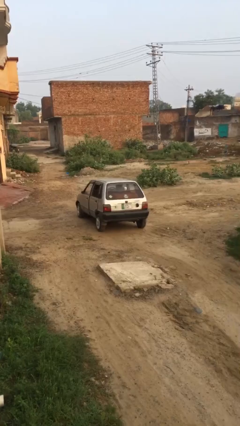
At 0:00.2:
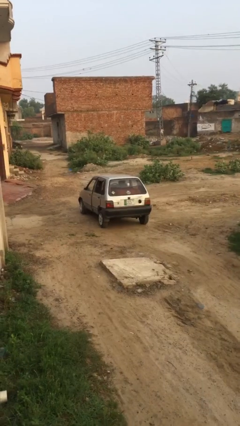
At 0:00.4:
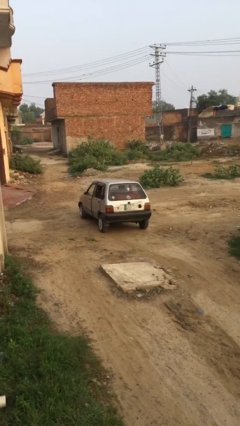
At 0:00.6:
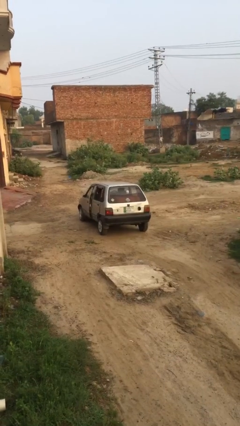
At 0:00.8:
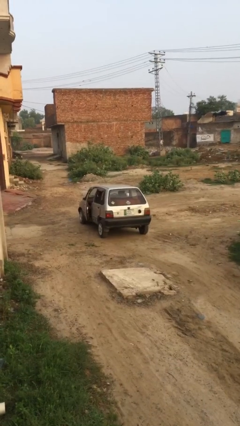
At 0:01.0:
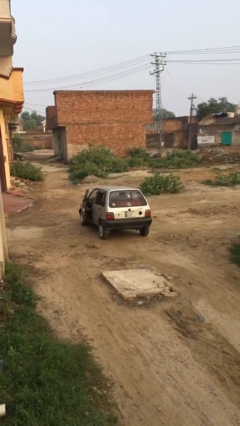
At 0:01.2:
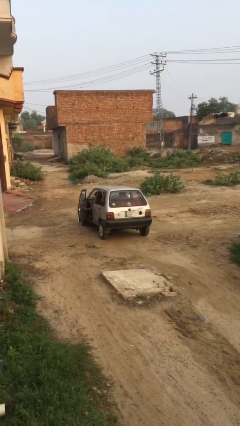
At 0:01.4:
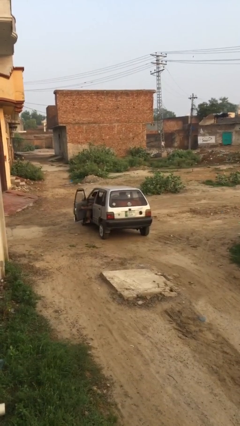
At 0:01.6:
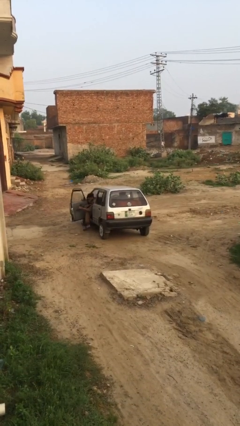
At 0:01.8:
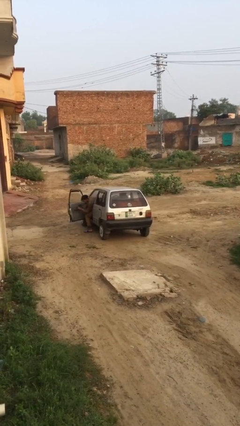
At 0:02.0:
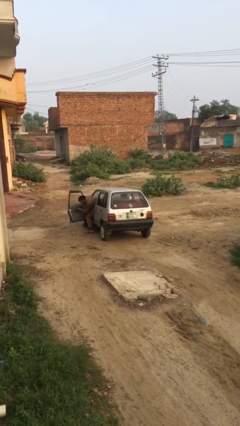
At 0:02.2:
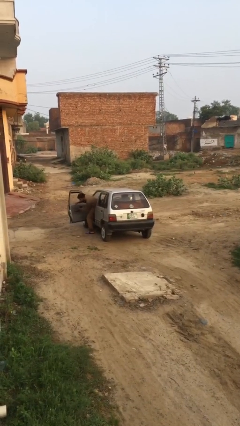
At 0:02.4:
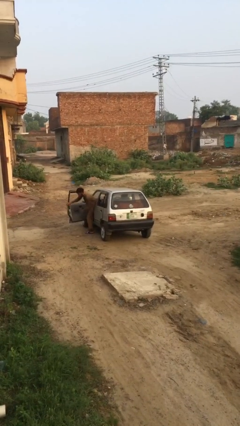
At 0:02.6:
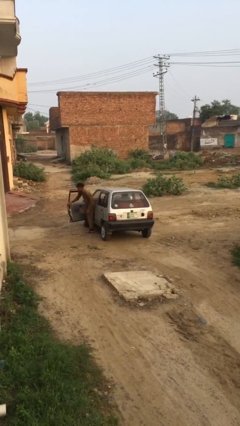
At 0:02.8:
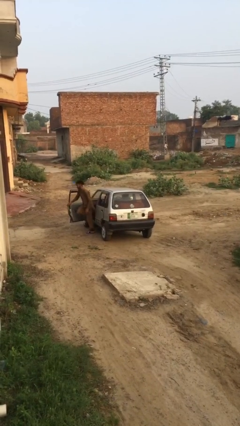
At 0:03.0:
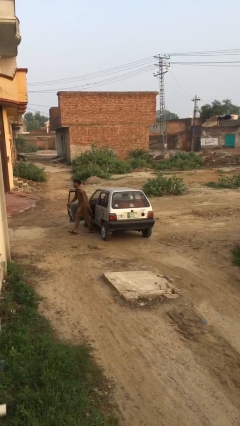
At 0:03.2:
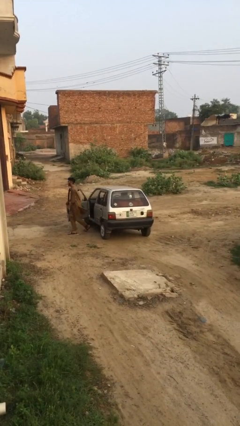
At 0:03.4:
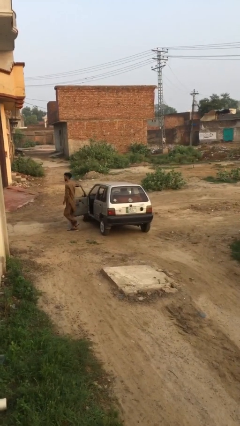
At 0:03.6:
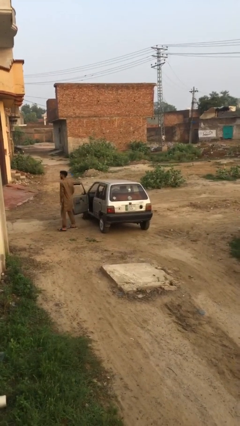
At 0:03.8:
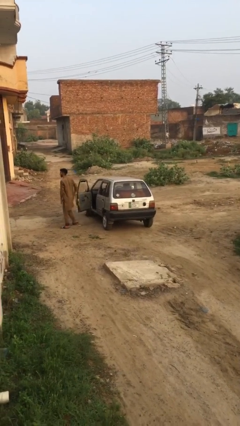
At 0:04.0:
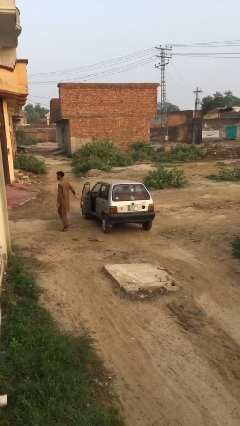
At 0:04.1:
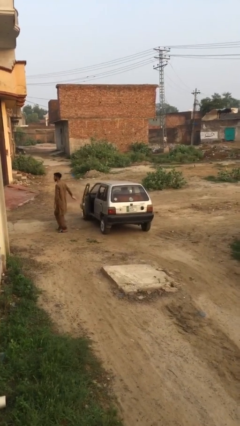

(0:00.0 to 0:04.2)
car drops off person

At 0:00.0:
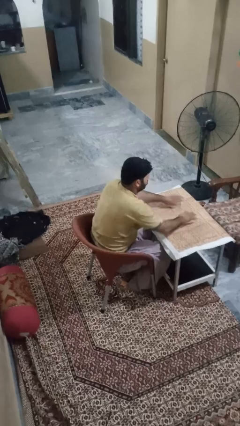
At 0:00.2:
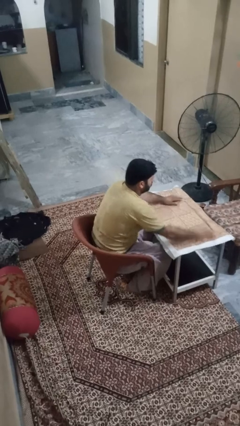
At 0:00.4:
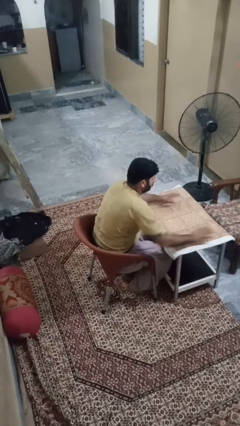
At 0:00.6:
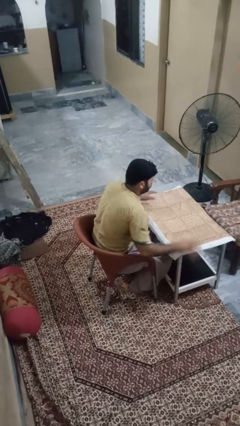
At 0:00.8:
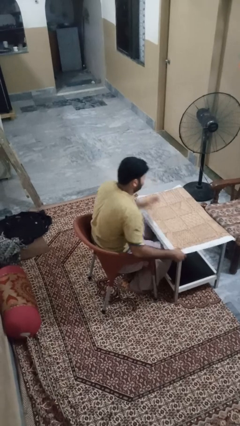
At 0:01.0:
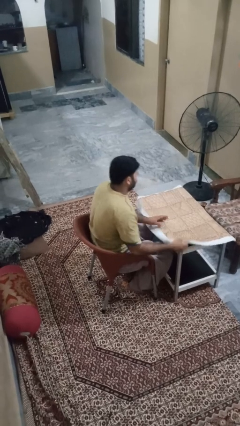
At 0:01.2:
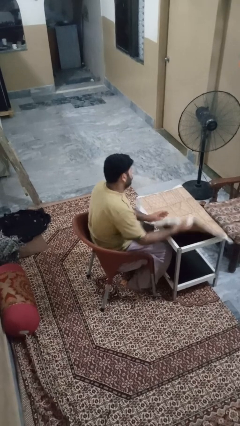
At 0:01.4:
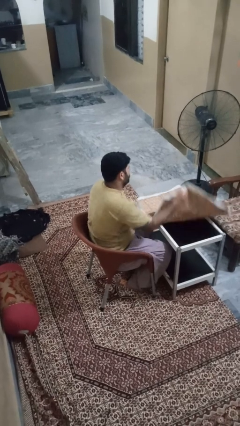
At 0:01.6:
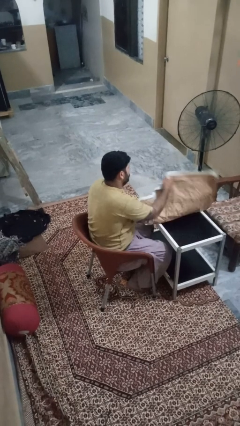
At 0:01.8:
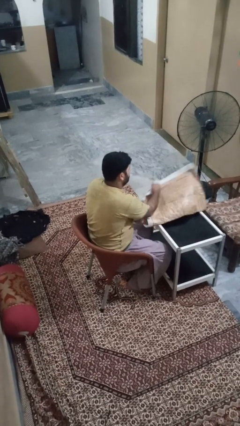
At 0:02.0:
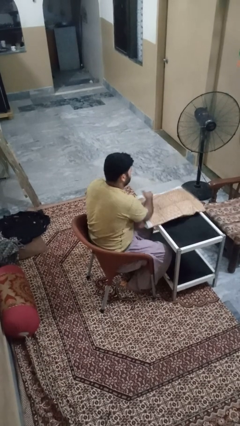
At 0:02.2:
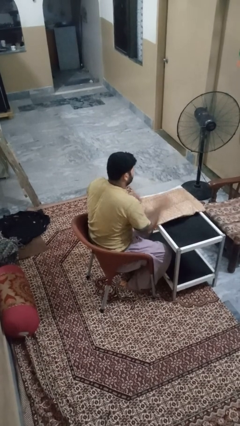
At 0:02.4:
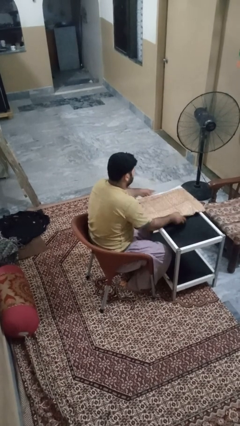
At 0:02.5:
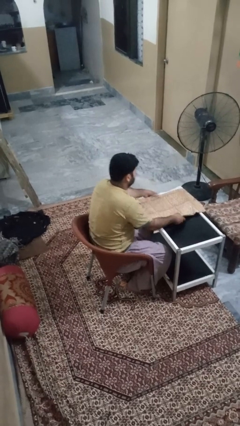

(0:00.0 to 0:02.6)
person folds tablecloth

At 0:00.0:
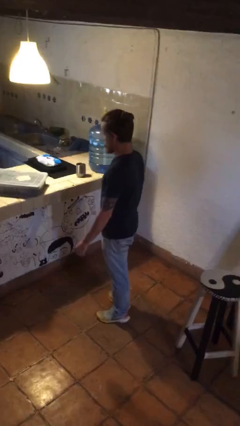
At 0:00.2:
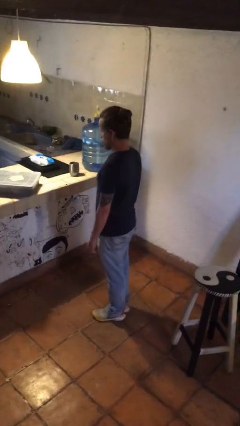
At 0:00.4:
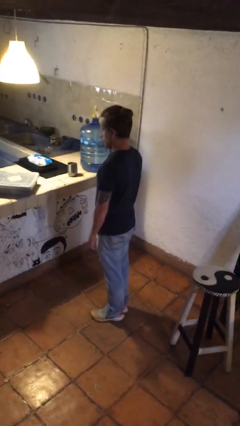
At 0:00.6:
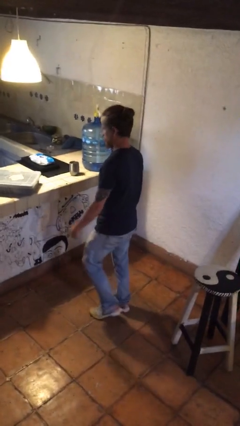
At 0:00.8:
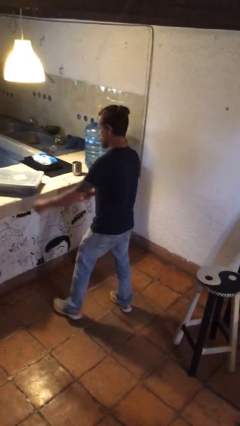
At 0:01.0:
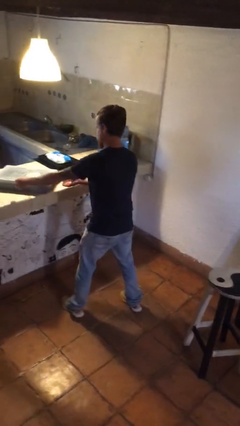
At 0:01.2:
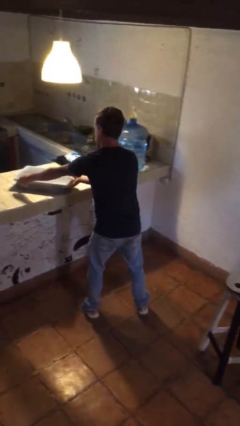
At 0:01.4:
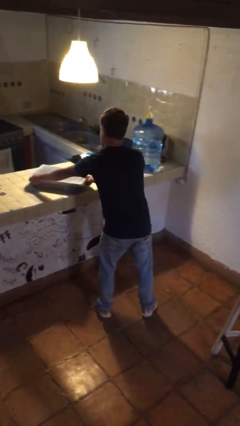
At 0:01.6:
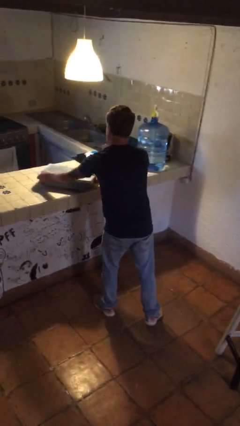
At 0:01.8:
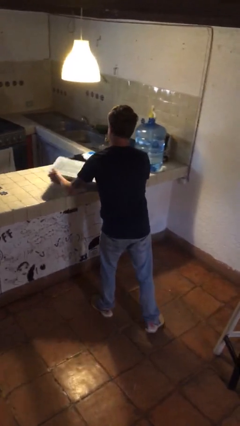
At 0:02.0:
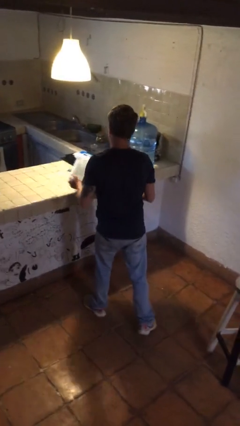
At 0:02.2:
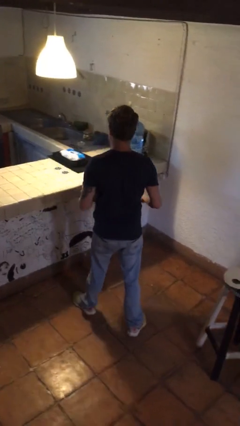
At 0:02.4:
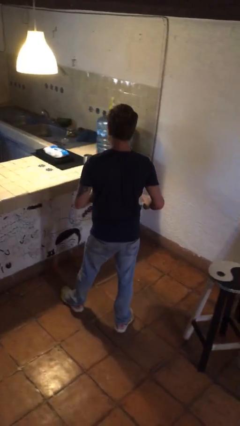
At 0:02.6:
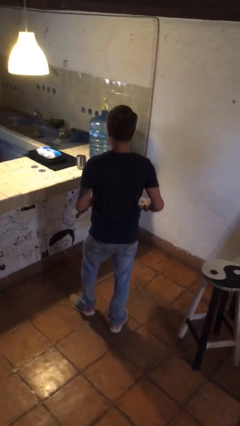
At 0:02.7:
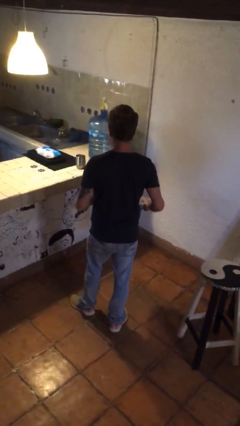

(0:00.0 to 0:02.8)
person picks up object from countertop

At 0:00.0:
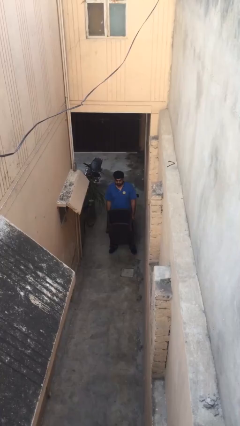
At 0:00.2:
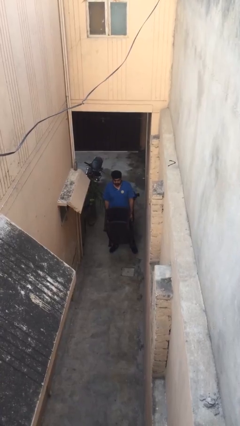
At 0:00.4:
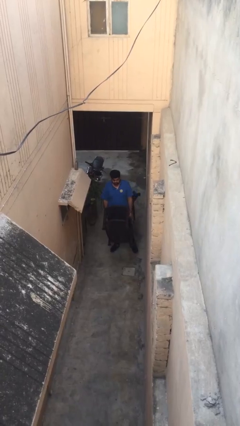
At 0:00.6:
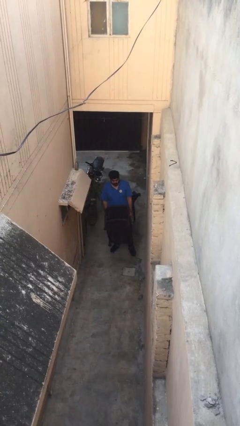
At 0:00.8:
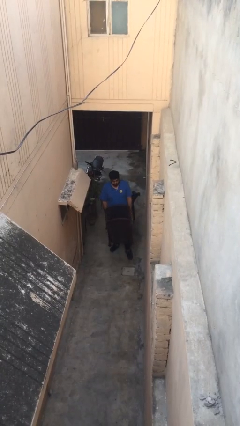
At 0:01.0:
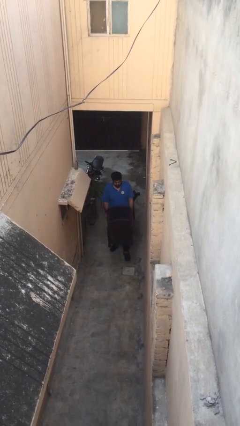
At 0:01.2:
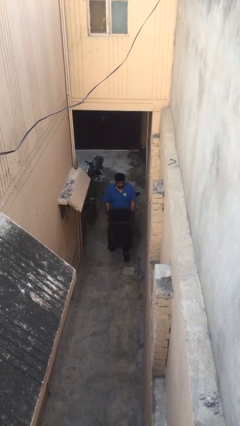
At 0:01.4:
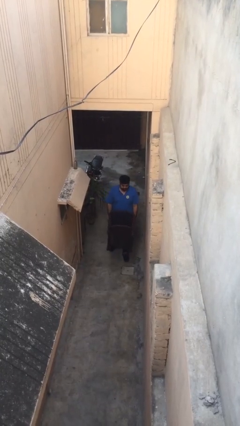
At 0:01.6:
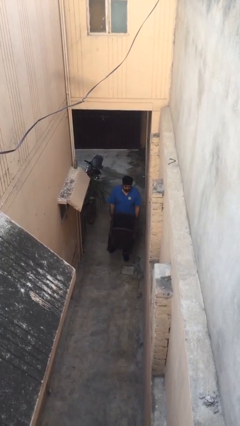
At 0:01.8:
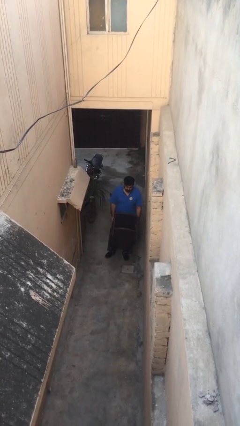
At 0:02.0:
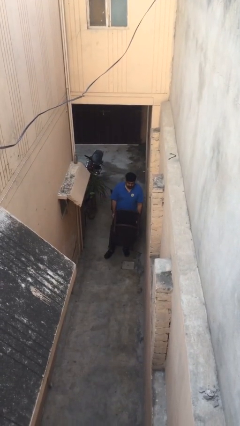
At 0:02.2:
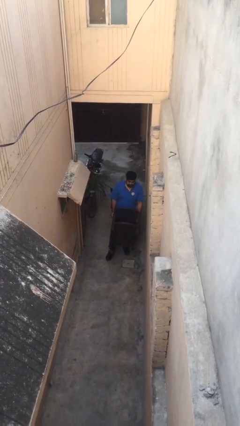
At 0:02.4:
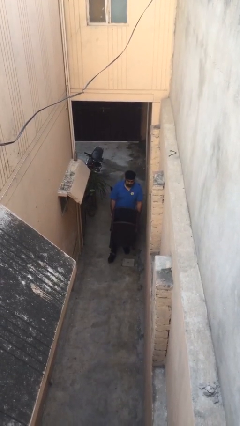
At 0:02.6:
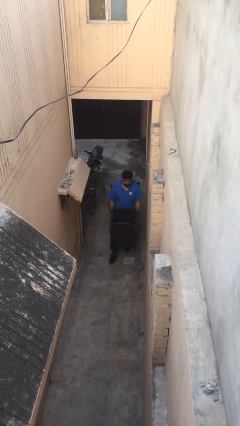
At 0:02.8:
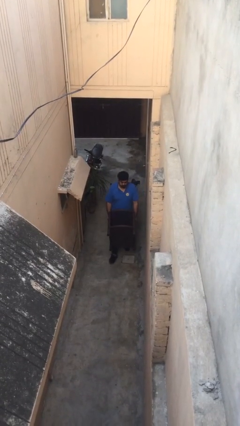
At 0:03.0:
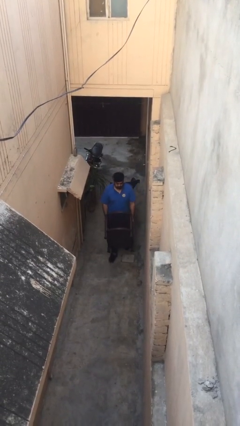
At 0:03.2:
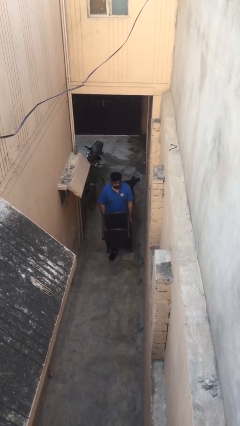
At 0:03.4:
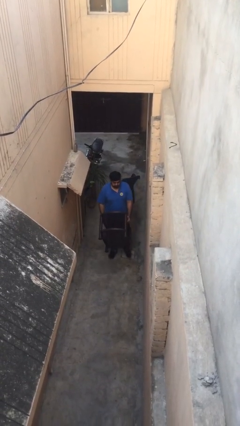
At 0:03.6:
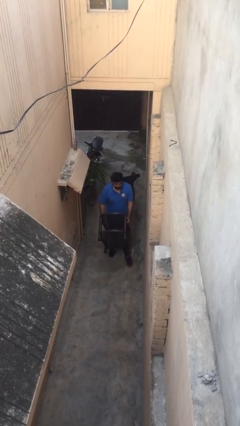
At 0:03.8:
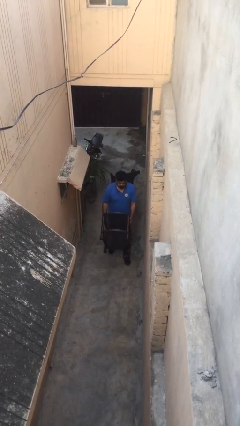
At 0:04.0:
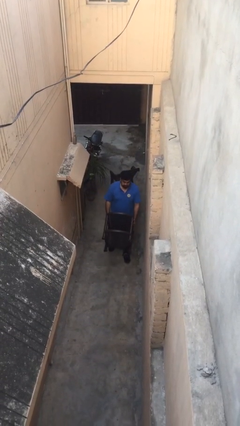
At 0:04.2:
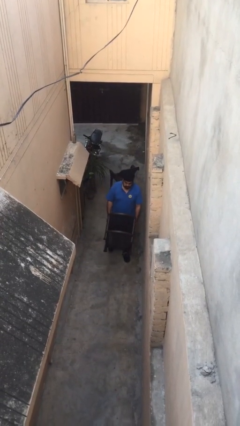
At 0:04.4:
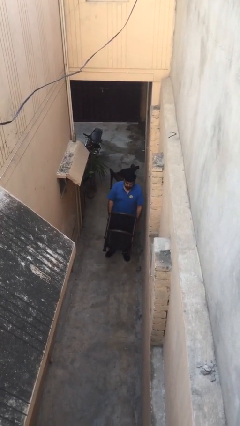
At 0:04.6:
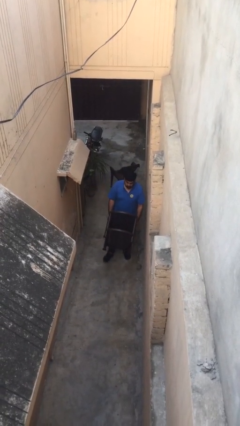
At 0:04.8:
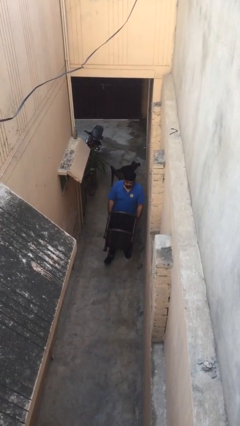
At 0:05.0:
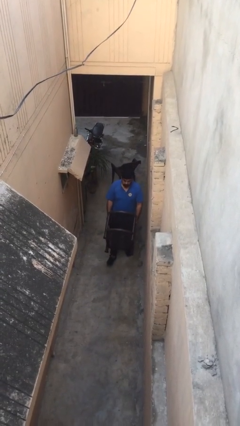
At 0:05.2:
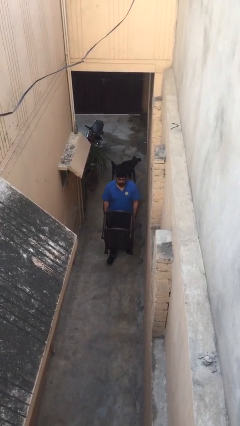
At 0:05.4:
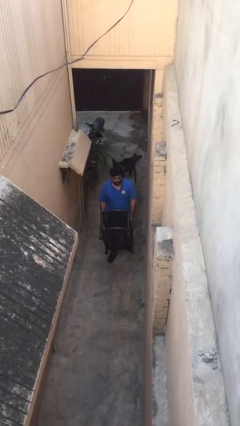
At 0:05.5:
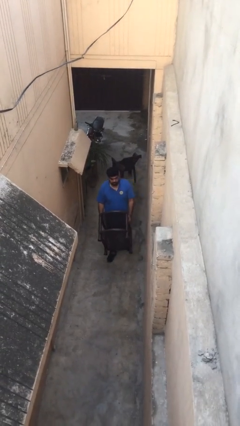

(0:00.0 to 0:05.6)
person carries heavy object

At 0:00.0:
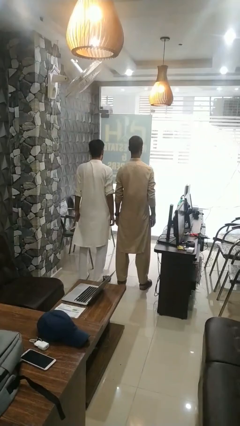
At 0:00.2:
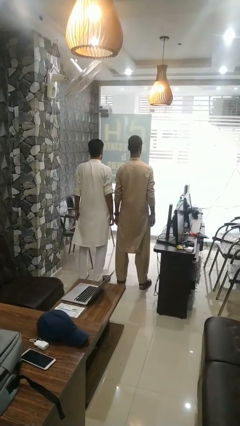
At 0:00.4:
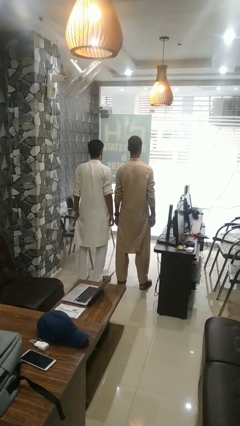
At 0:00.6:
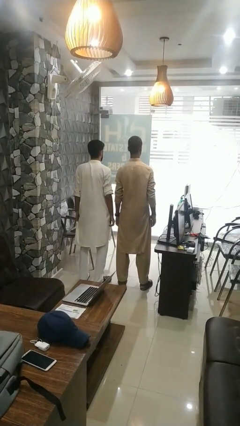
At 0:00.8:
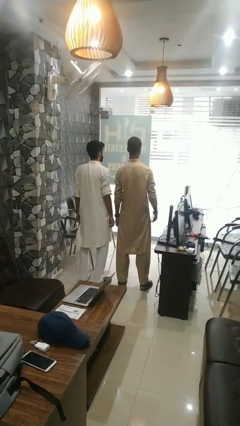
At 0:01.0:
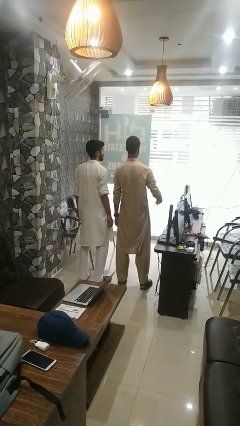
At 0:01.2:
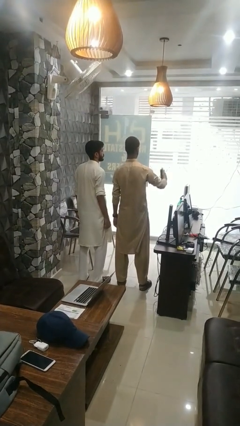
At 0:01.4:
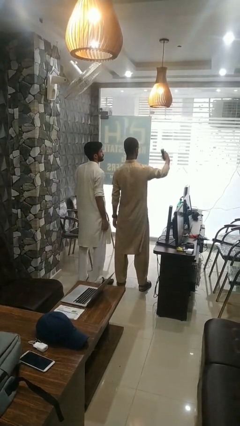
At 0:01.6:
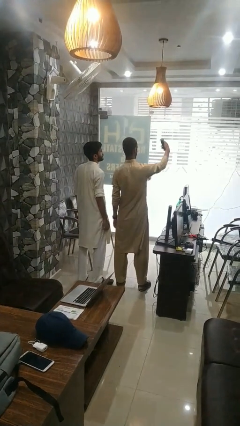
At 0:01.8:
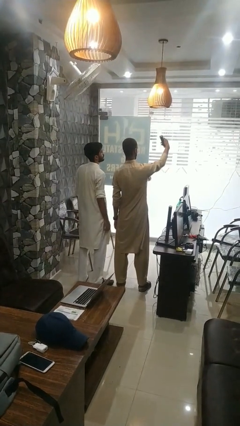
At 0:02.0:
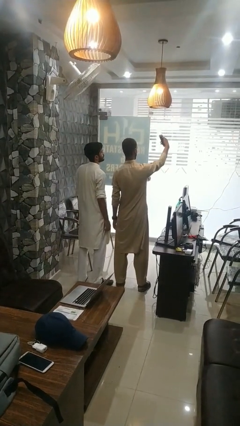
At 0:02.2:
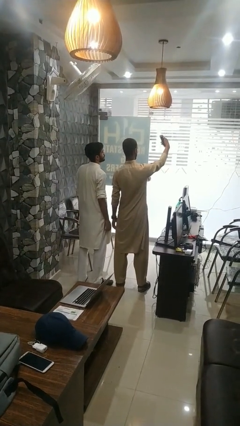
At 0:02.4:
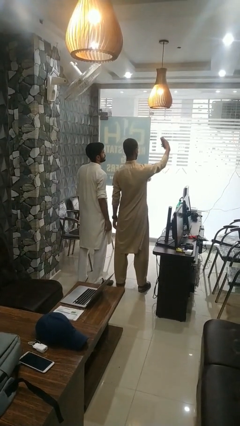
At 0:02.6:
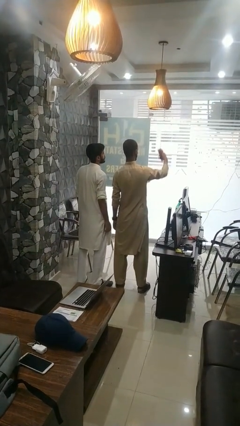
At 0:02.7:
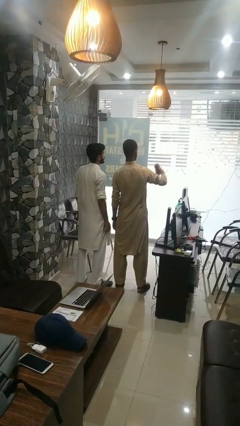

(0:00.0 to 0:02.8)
person takes selfie with person
